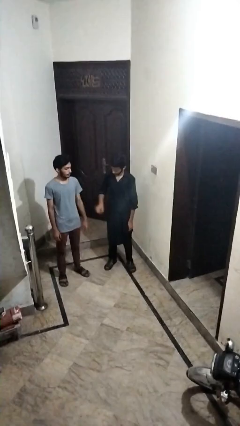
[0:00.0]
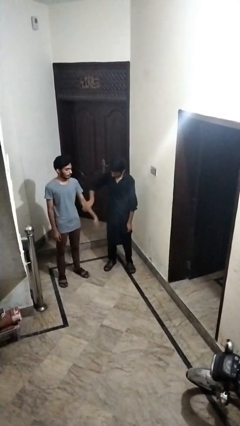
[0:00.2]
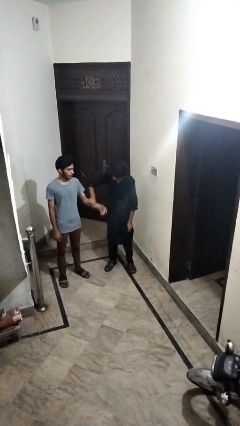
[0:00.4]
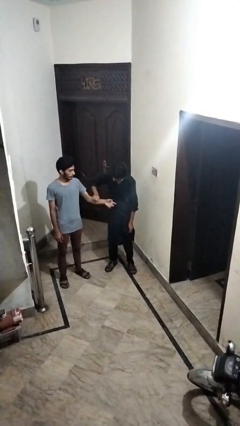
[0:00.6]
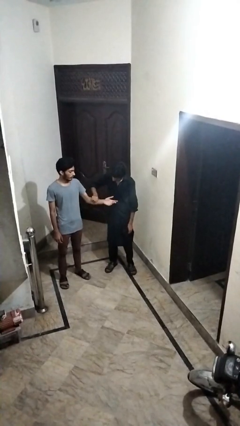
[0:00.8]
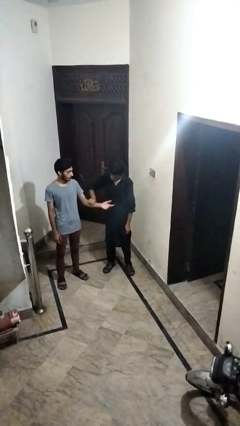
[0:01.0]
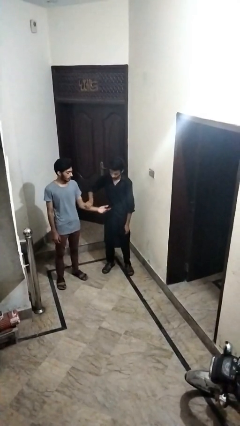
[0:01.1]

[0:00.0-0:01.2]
person grabs person by forearm

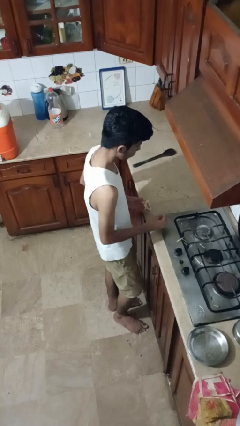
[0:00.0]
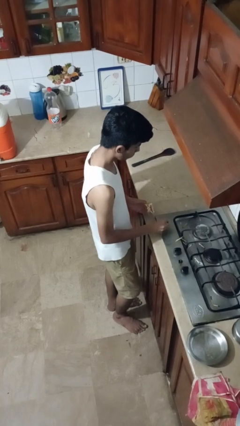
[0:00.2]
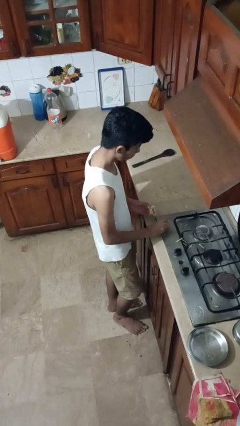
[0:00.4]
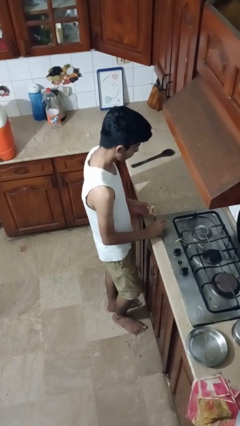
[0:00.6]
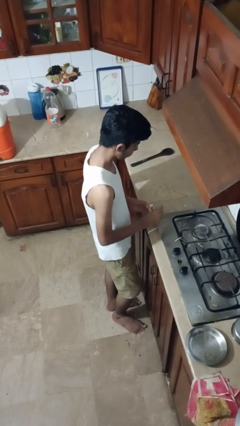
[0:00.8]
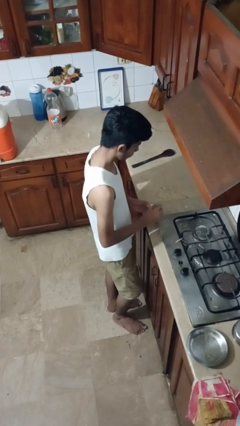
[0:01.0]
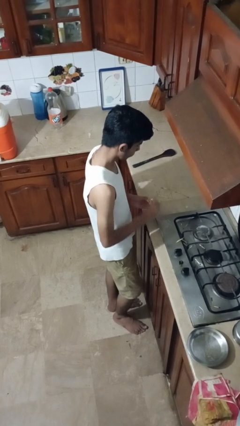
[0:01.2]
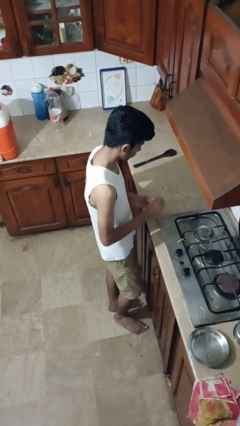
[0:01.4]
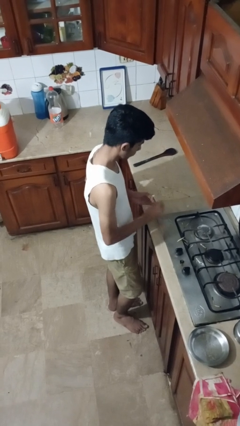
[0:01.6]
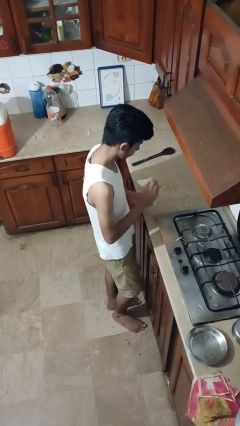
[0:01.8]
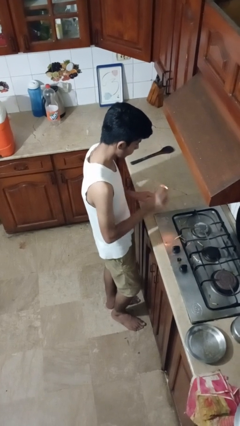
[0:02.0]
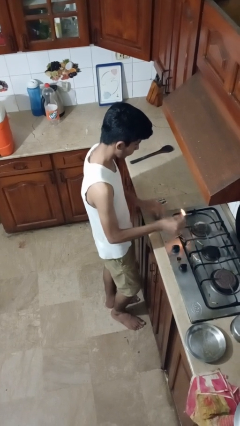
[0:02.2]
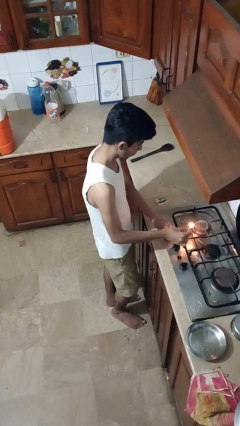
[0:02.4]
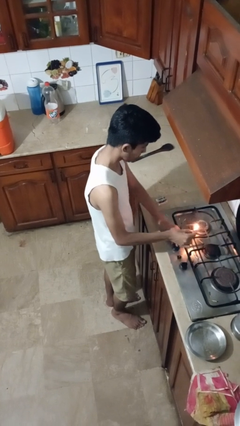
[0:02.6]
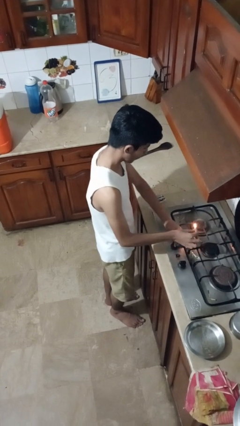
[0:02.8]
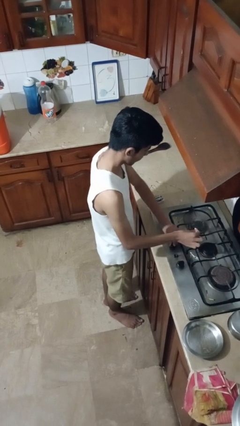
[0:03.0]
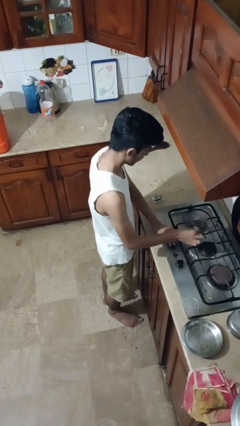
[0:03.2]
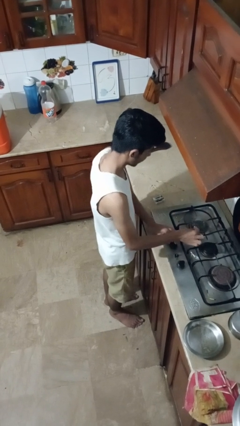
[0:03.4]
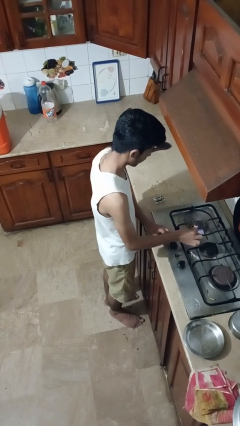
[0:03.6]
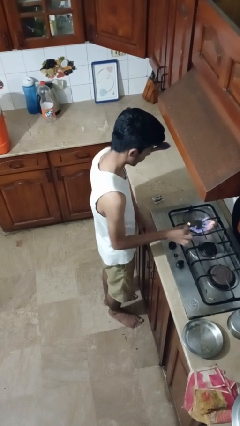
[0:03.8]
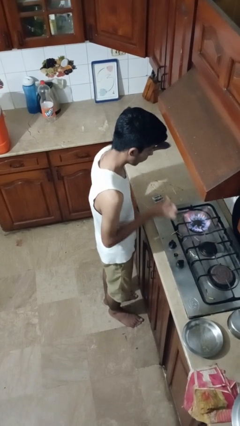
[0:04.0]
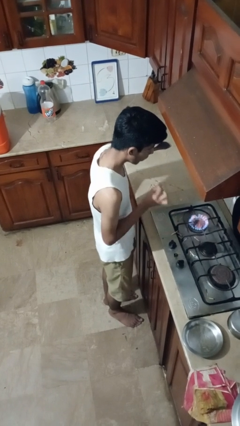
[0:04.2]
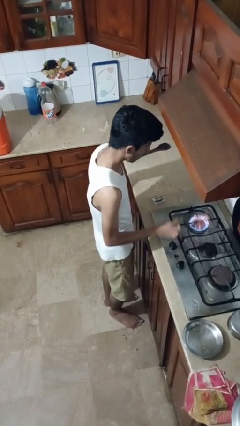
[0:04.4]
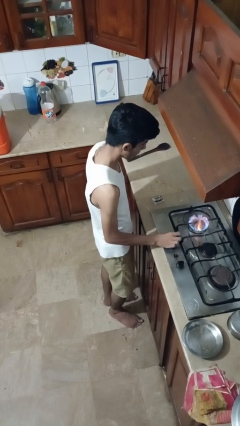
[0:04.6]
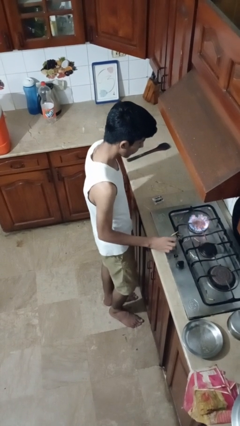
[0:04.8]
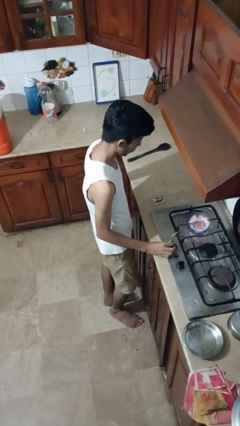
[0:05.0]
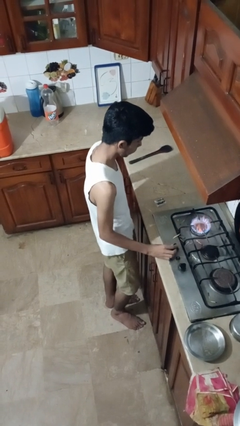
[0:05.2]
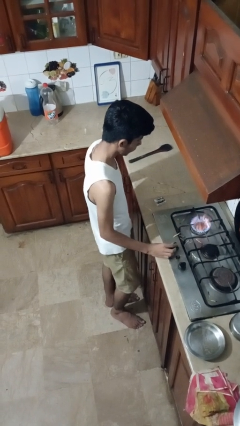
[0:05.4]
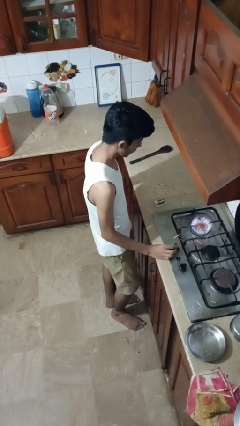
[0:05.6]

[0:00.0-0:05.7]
person turns on stovetop

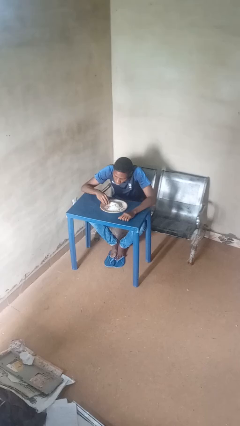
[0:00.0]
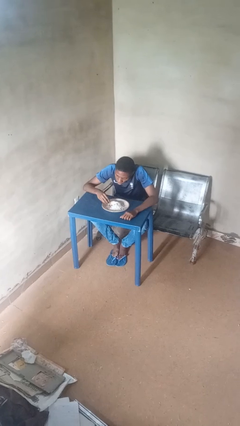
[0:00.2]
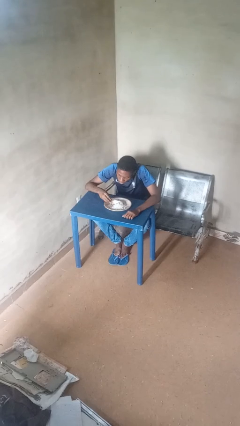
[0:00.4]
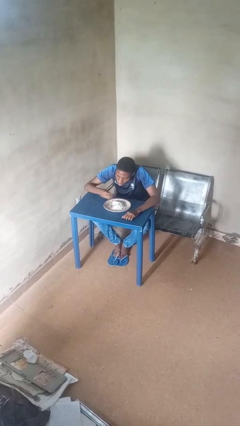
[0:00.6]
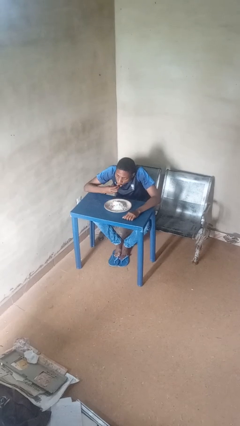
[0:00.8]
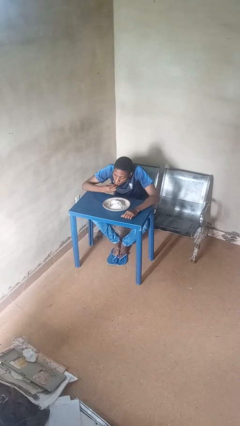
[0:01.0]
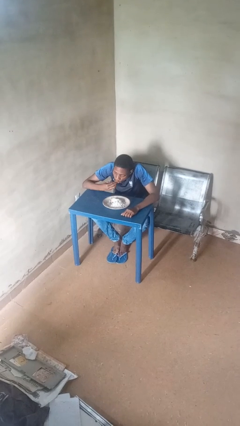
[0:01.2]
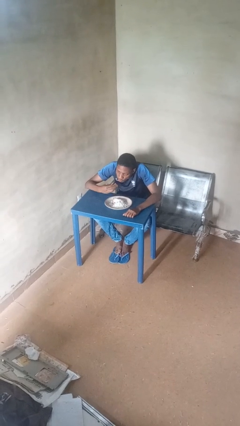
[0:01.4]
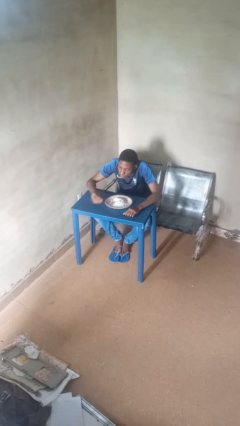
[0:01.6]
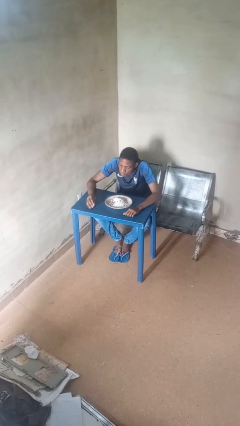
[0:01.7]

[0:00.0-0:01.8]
person eats with hands

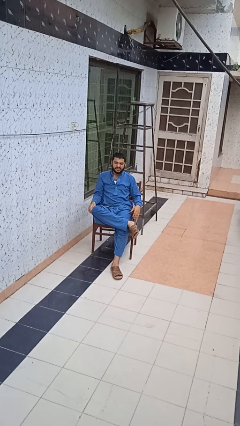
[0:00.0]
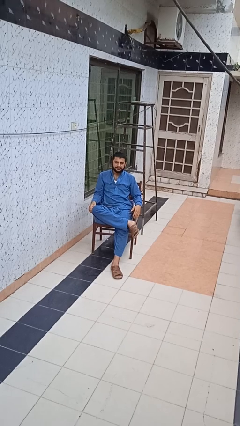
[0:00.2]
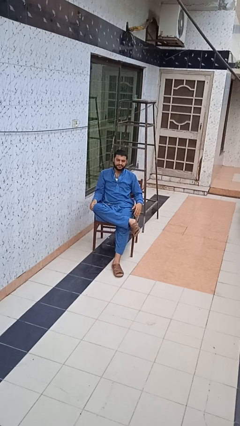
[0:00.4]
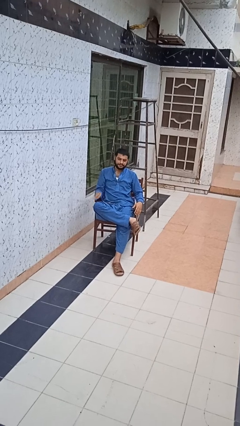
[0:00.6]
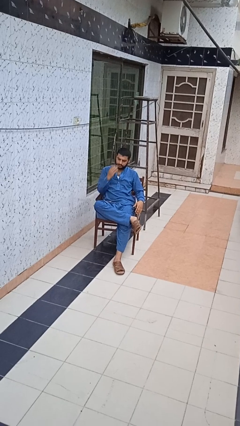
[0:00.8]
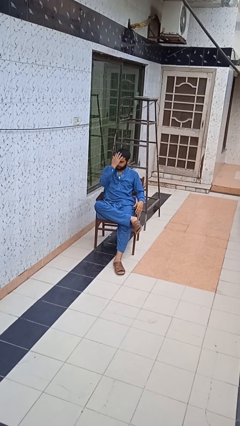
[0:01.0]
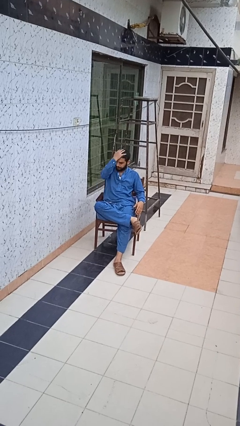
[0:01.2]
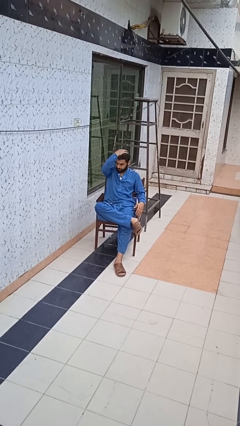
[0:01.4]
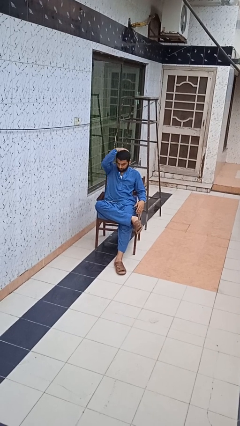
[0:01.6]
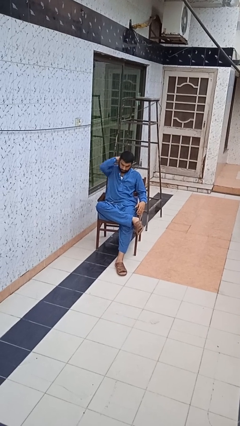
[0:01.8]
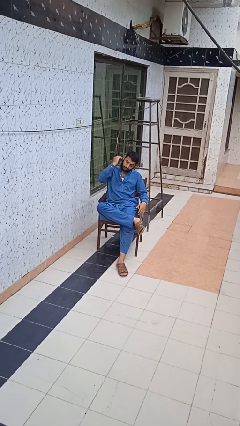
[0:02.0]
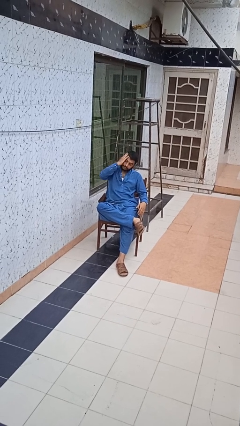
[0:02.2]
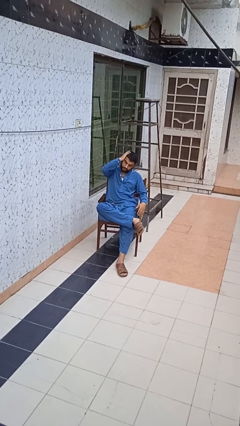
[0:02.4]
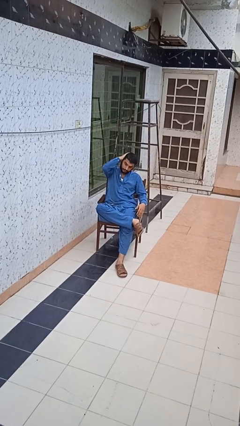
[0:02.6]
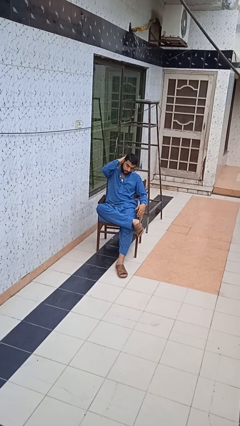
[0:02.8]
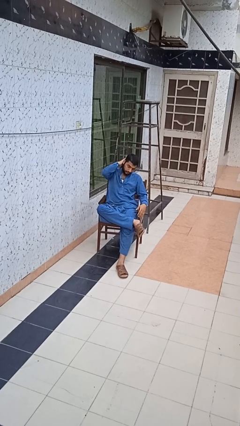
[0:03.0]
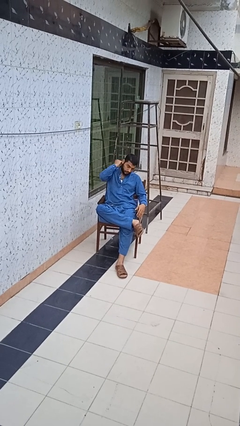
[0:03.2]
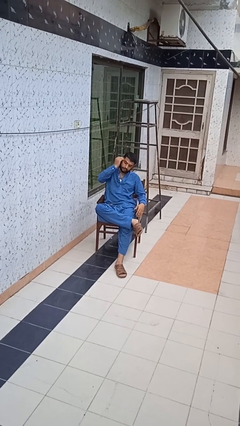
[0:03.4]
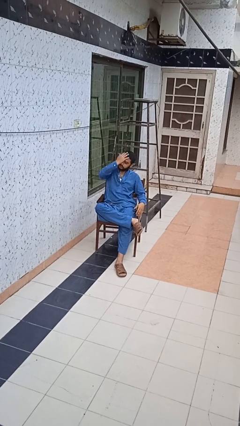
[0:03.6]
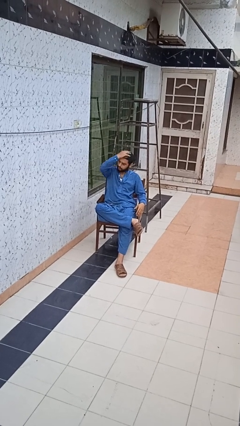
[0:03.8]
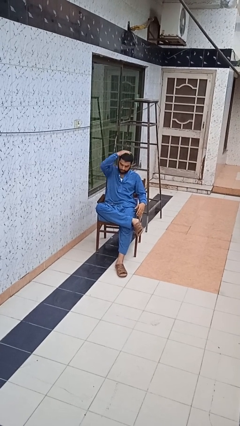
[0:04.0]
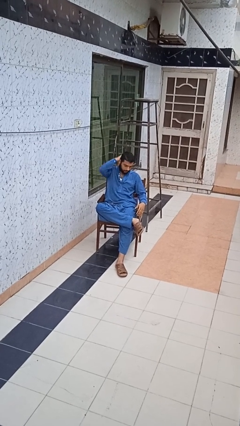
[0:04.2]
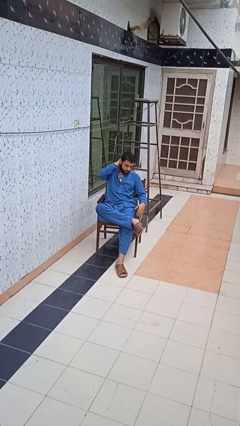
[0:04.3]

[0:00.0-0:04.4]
person strokes hair

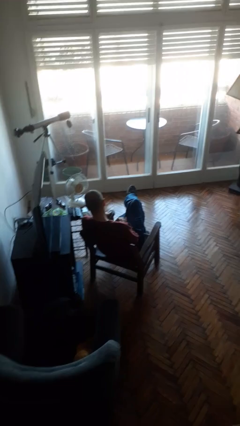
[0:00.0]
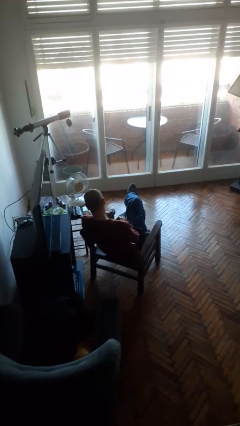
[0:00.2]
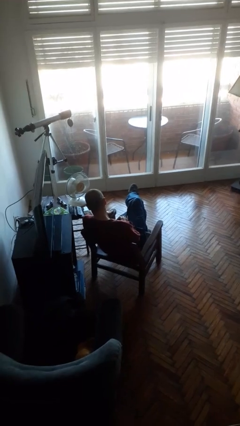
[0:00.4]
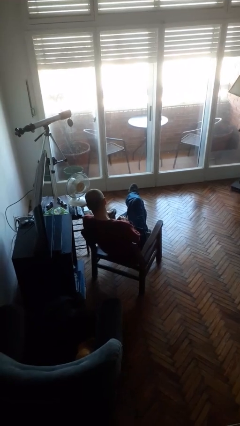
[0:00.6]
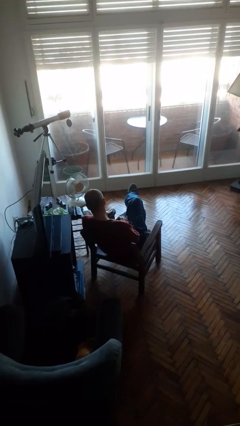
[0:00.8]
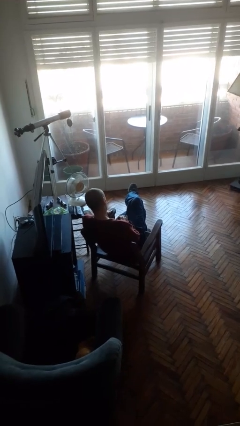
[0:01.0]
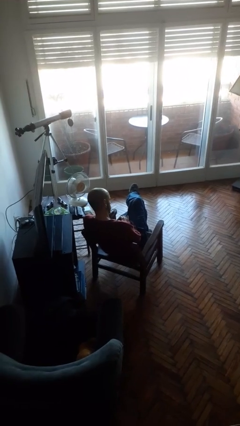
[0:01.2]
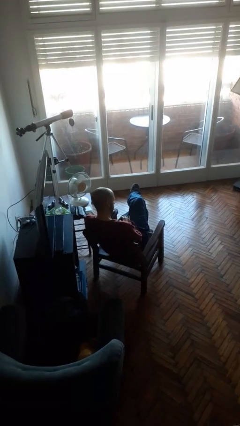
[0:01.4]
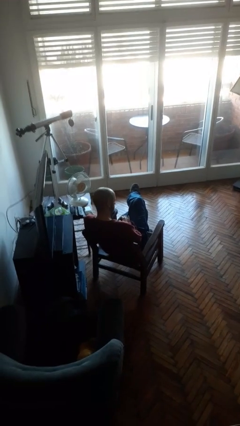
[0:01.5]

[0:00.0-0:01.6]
person falls from chair

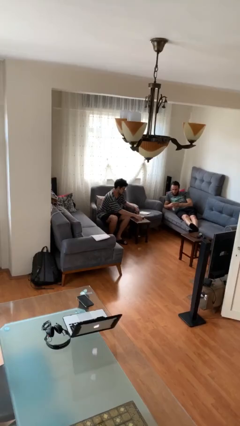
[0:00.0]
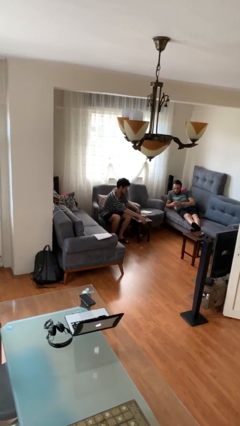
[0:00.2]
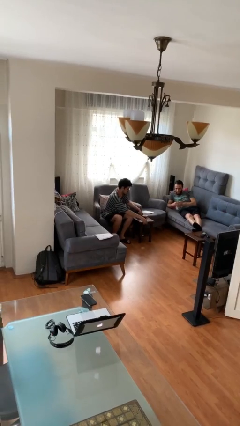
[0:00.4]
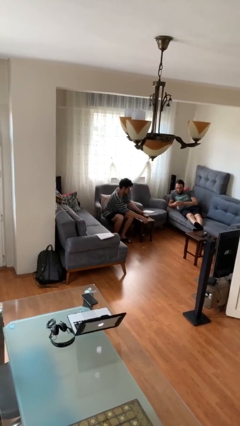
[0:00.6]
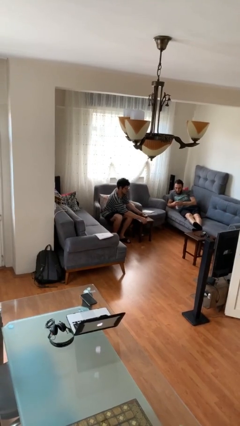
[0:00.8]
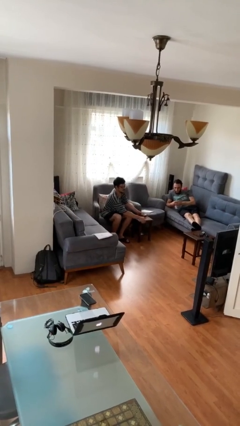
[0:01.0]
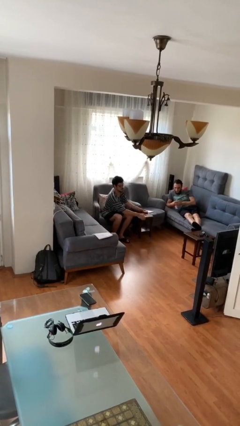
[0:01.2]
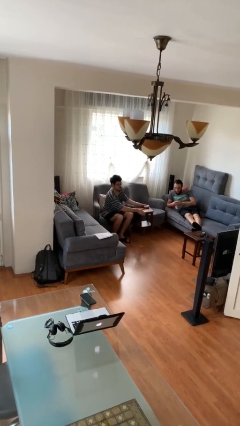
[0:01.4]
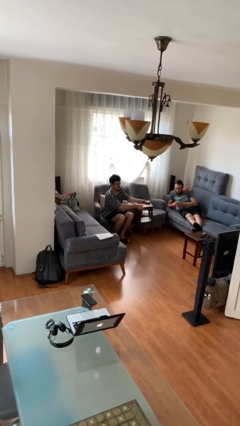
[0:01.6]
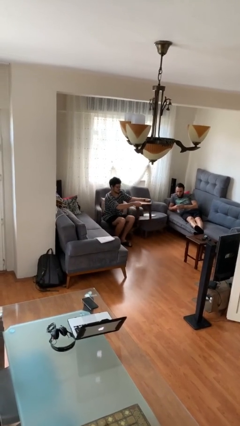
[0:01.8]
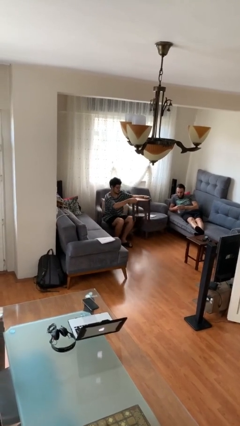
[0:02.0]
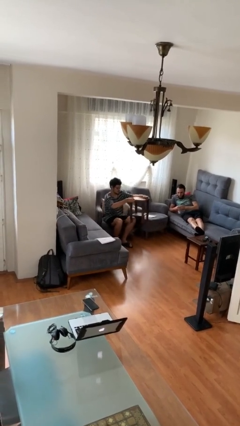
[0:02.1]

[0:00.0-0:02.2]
person picks up object from floor

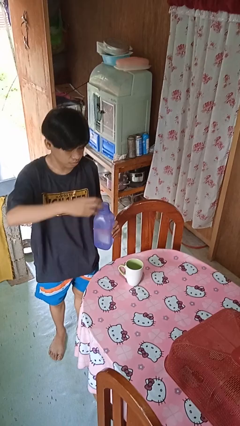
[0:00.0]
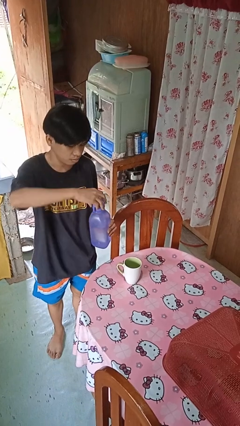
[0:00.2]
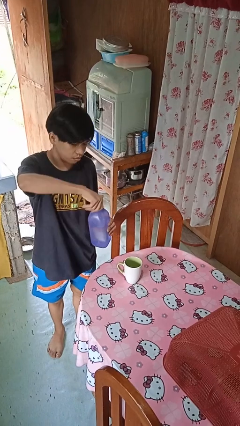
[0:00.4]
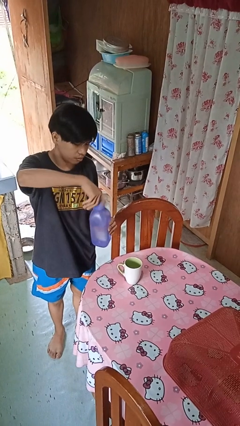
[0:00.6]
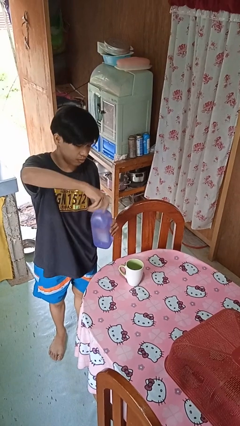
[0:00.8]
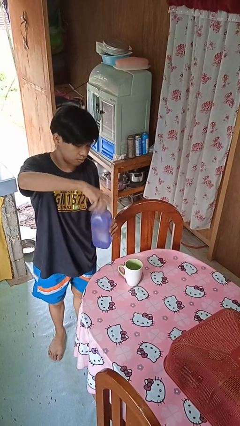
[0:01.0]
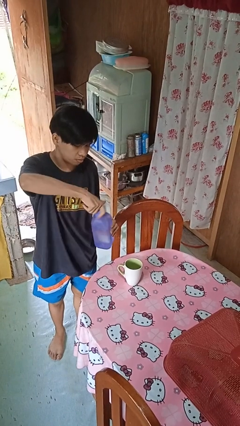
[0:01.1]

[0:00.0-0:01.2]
person screws lid to bottle
